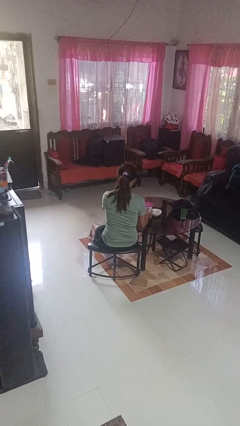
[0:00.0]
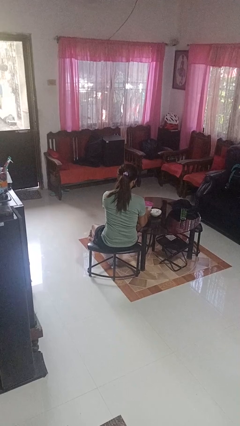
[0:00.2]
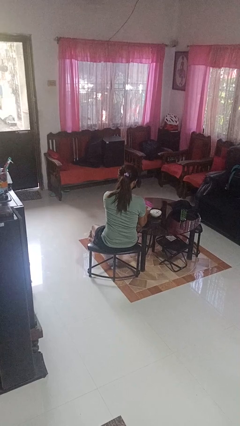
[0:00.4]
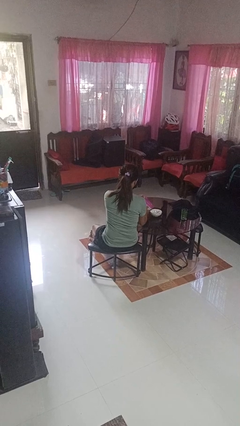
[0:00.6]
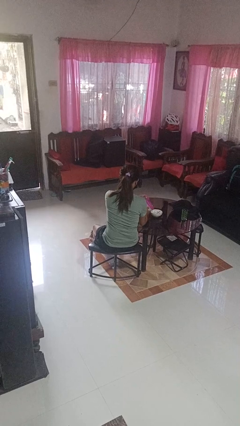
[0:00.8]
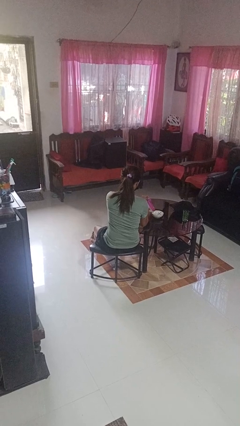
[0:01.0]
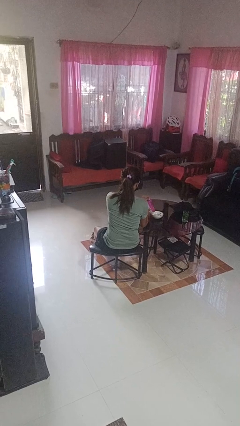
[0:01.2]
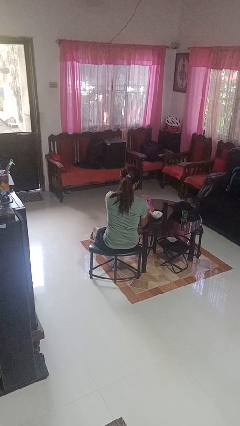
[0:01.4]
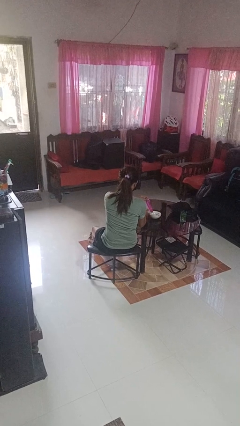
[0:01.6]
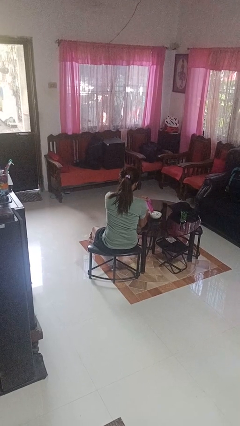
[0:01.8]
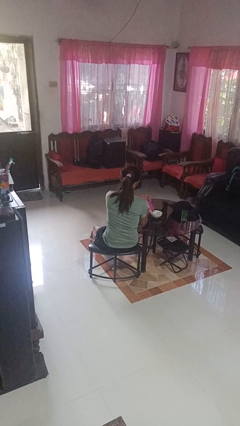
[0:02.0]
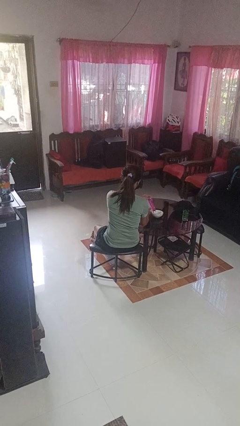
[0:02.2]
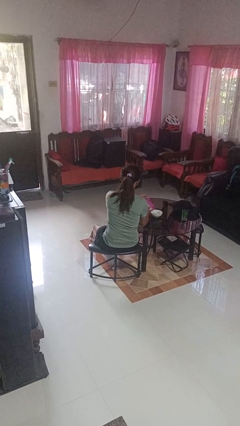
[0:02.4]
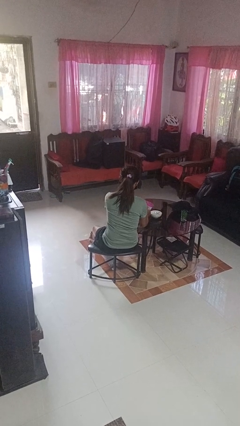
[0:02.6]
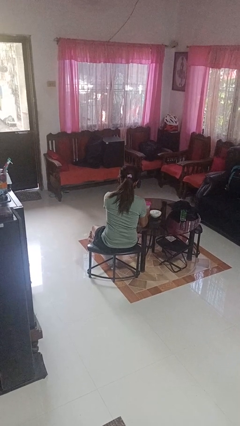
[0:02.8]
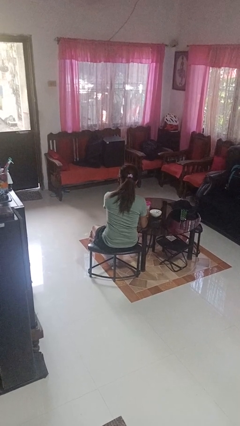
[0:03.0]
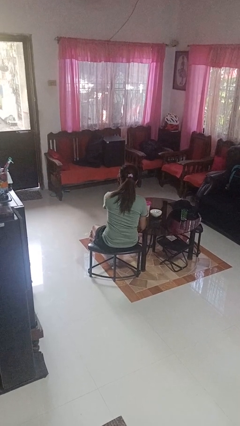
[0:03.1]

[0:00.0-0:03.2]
person pours into bowl

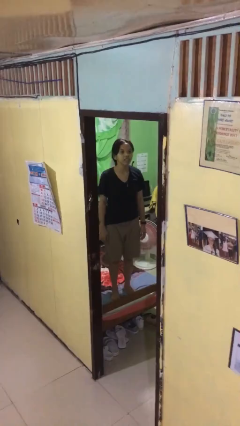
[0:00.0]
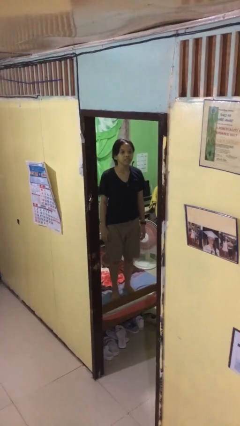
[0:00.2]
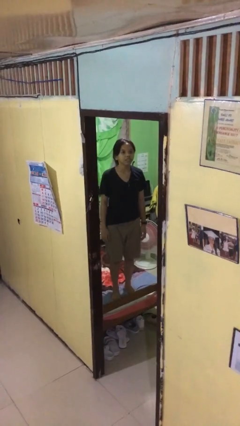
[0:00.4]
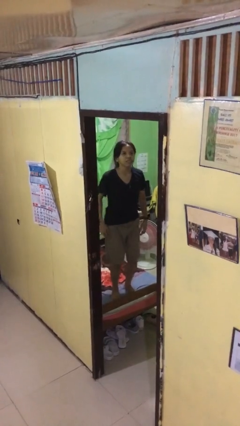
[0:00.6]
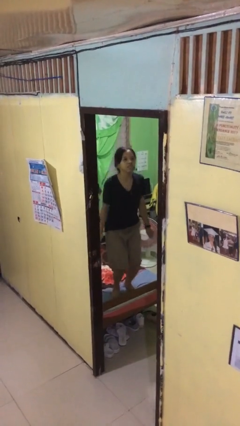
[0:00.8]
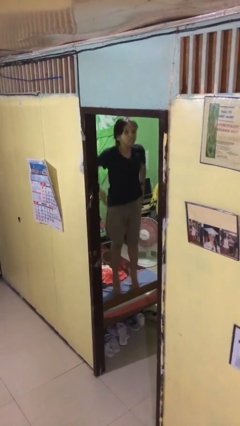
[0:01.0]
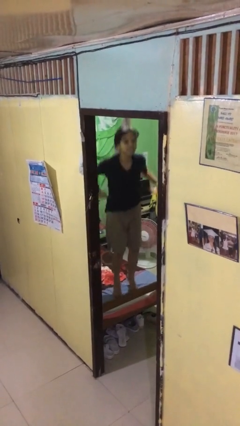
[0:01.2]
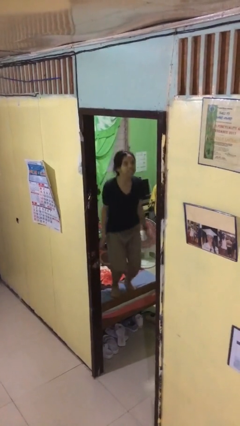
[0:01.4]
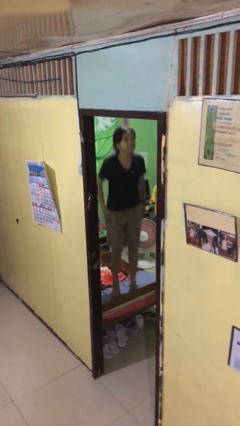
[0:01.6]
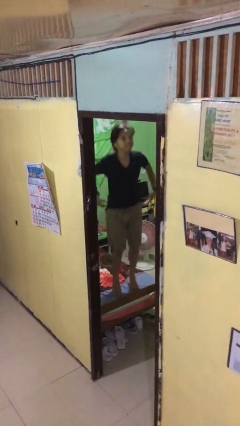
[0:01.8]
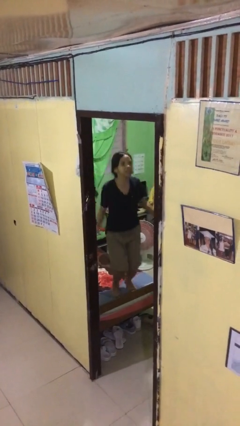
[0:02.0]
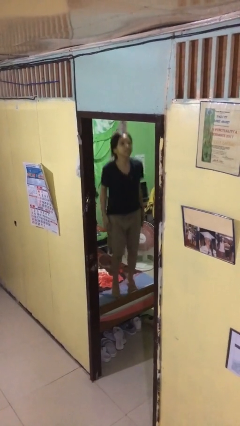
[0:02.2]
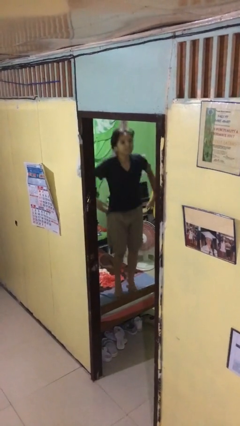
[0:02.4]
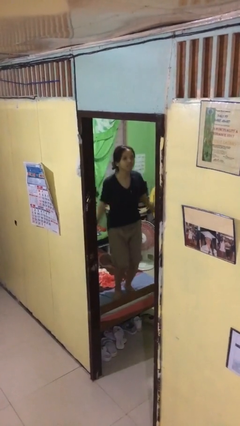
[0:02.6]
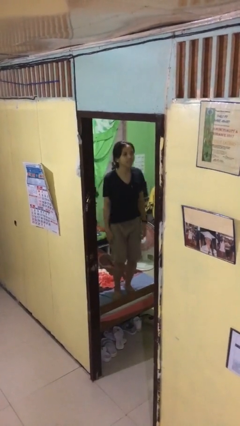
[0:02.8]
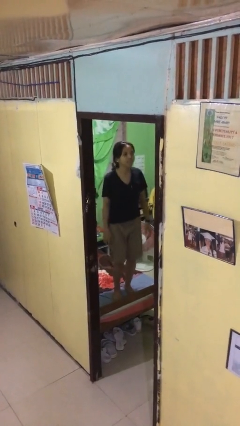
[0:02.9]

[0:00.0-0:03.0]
person jumps on bed

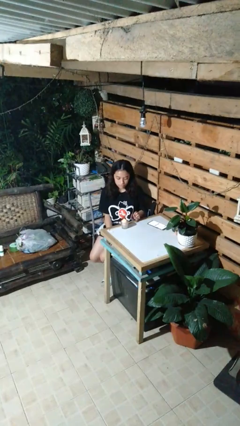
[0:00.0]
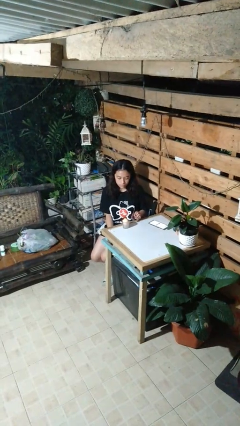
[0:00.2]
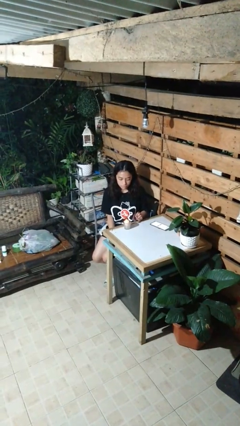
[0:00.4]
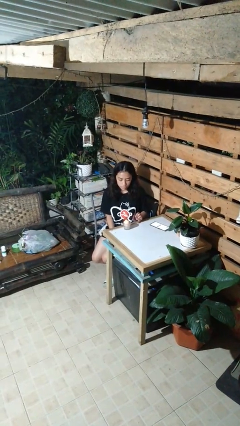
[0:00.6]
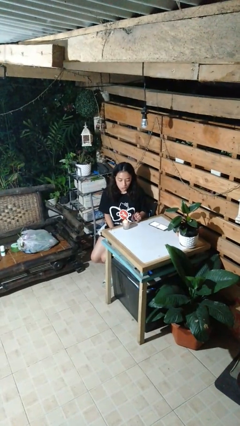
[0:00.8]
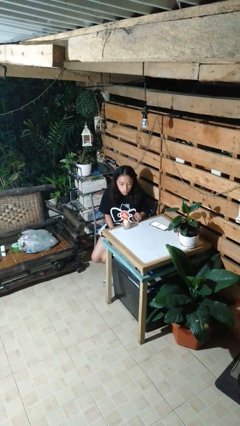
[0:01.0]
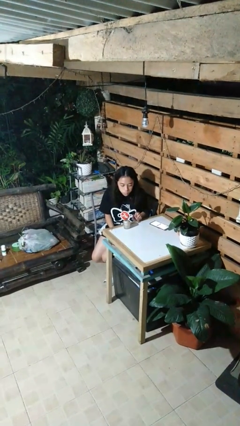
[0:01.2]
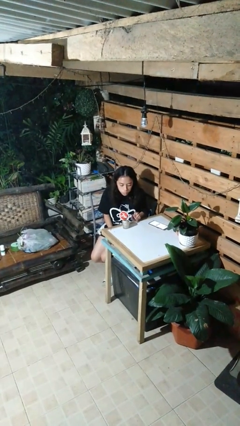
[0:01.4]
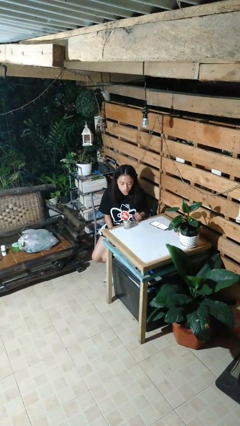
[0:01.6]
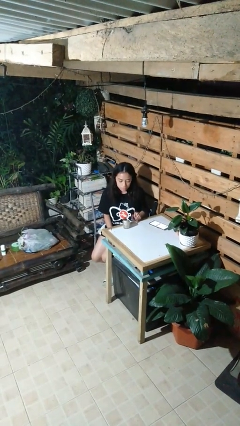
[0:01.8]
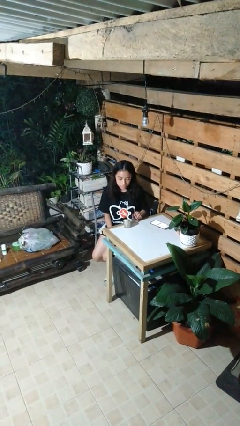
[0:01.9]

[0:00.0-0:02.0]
person extinguishes candle

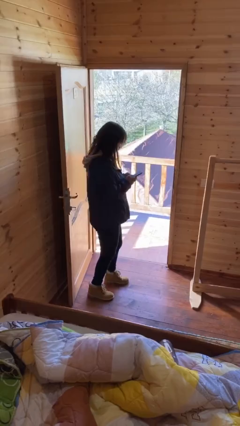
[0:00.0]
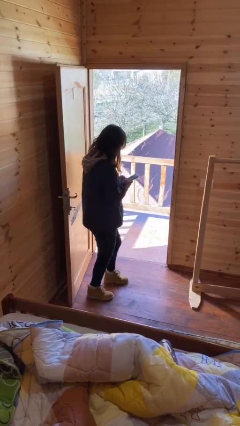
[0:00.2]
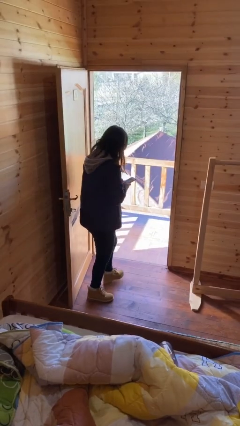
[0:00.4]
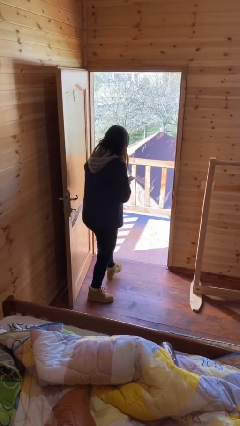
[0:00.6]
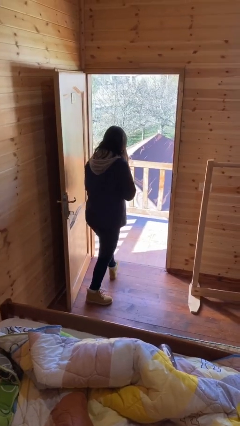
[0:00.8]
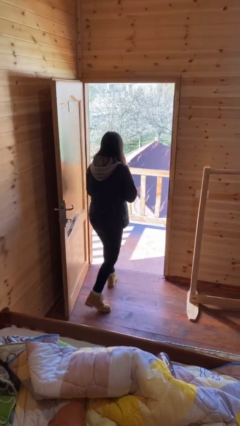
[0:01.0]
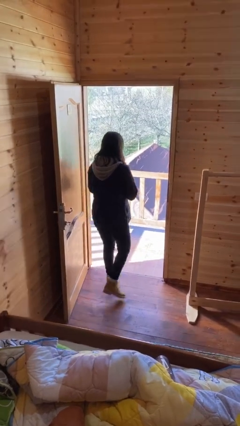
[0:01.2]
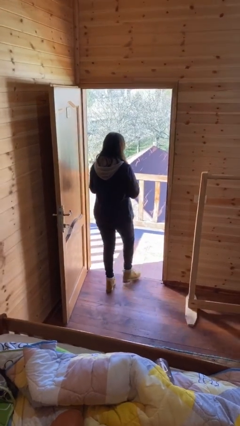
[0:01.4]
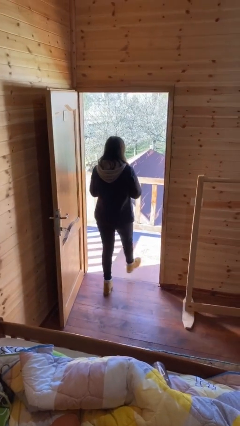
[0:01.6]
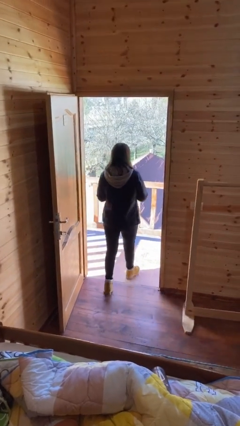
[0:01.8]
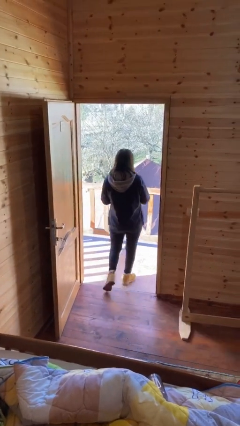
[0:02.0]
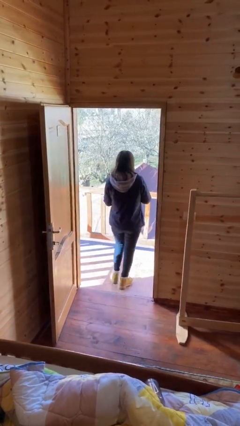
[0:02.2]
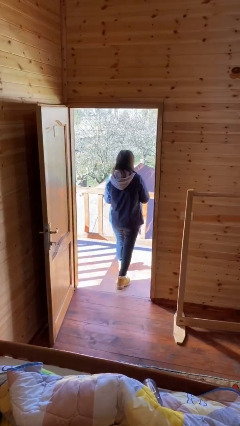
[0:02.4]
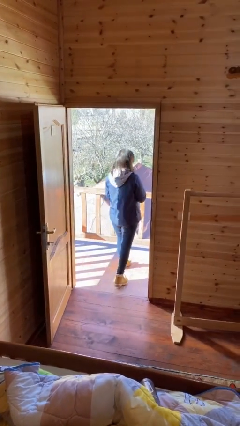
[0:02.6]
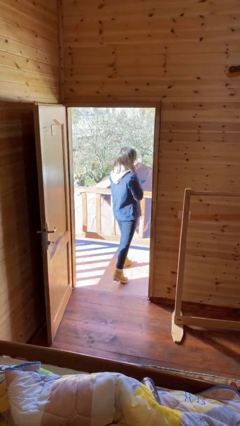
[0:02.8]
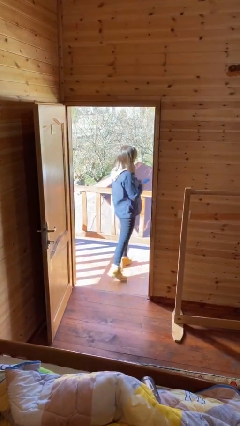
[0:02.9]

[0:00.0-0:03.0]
person exits scene through structure

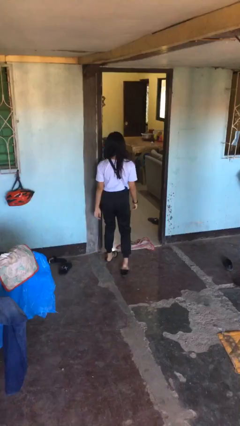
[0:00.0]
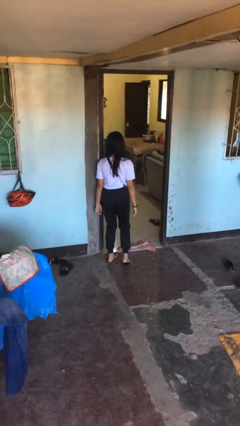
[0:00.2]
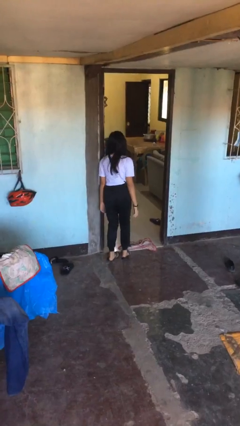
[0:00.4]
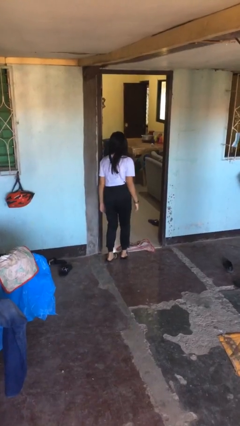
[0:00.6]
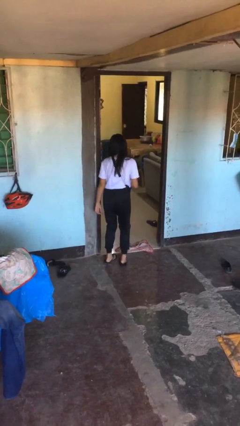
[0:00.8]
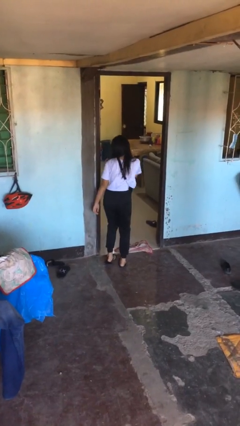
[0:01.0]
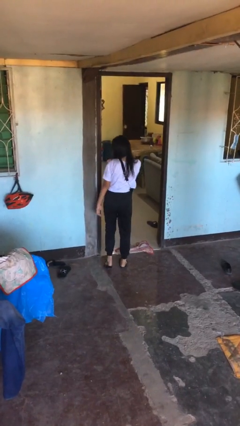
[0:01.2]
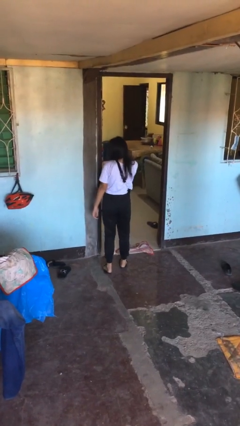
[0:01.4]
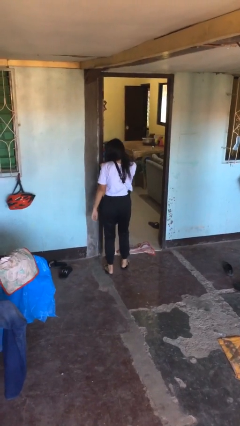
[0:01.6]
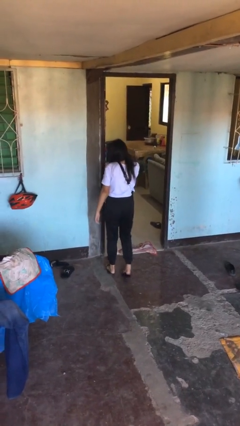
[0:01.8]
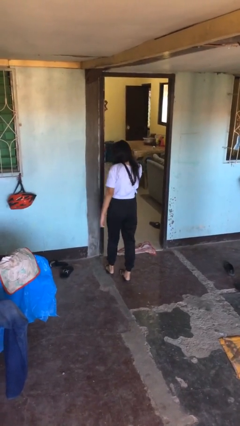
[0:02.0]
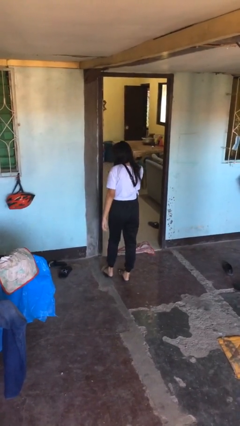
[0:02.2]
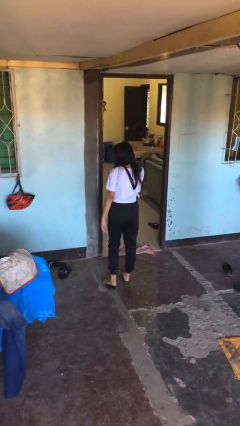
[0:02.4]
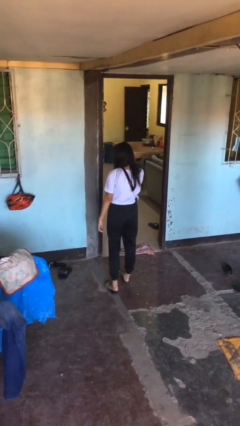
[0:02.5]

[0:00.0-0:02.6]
person bumps into wall

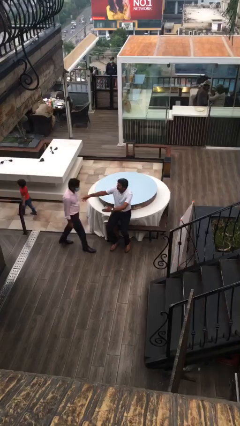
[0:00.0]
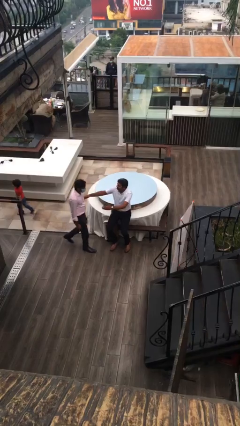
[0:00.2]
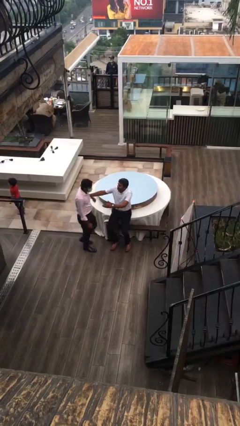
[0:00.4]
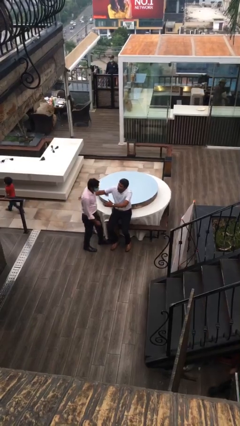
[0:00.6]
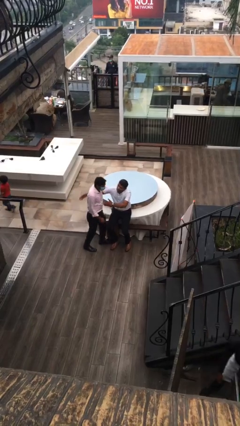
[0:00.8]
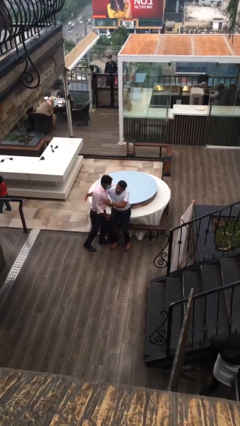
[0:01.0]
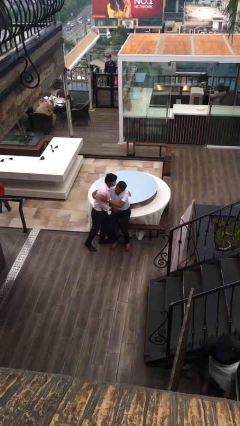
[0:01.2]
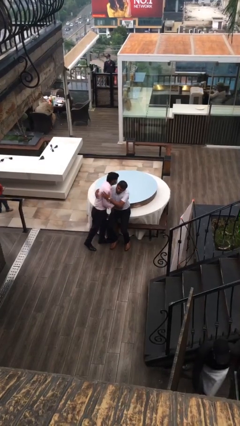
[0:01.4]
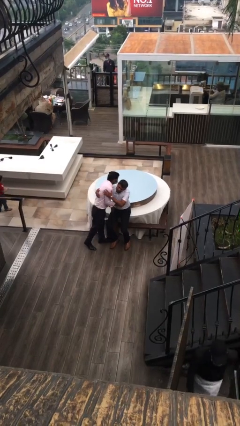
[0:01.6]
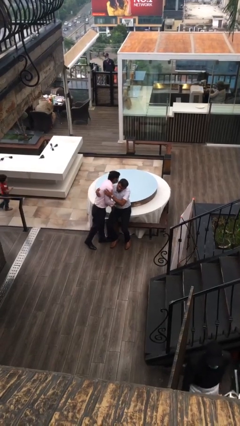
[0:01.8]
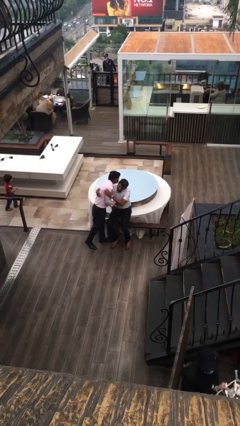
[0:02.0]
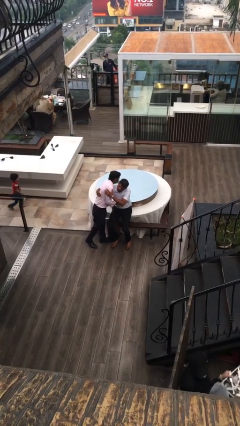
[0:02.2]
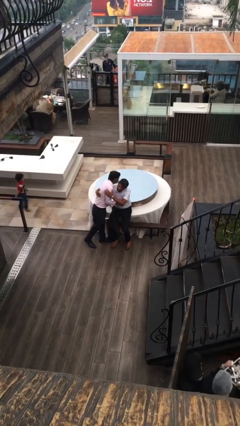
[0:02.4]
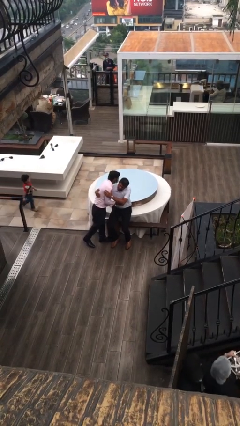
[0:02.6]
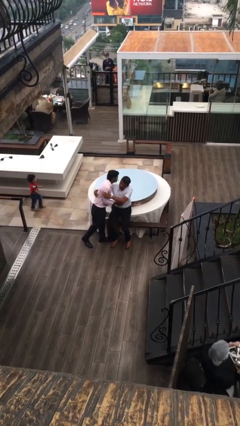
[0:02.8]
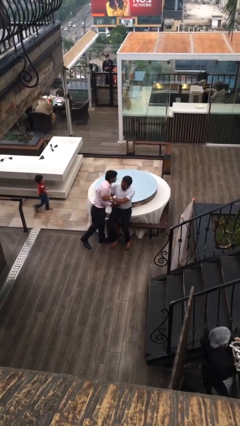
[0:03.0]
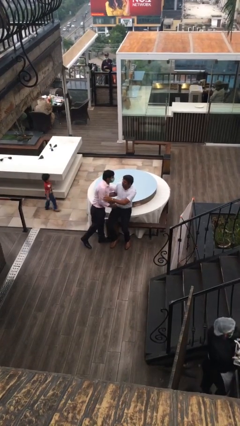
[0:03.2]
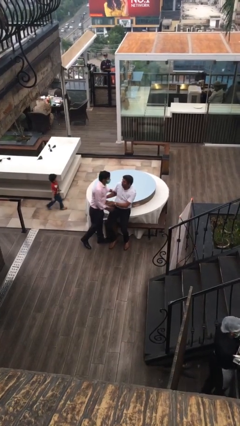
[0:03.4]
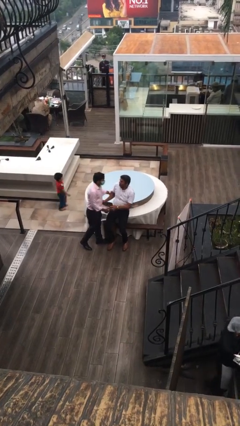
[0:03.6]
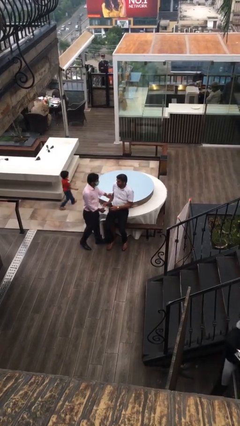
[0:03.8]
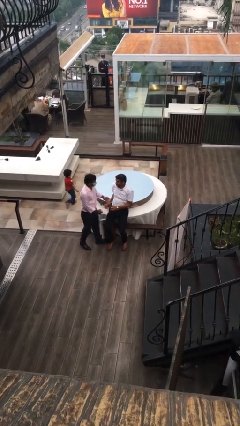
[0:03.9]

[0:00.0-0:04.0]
person embraces person
